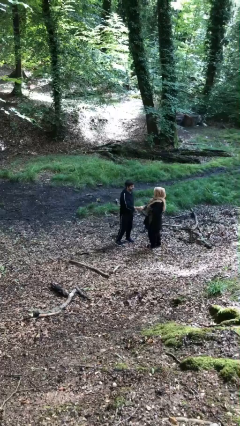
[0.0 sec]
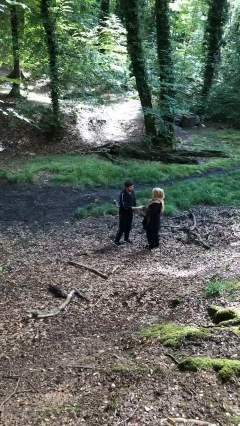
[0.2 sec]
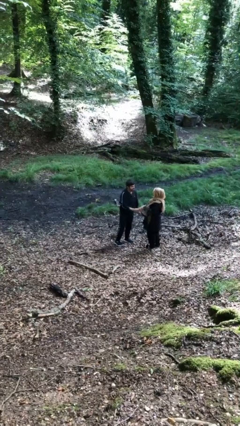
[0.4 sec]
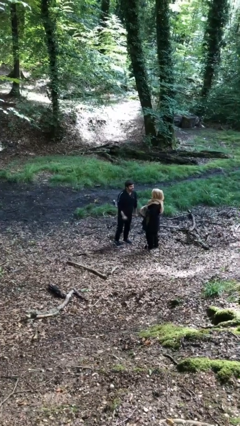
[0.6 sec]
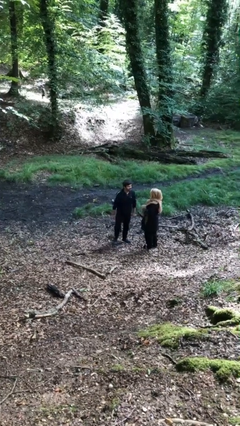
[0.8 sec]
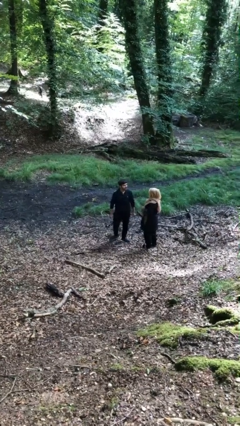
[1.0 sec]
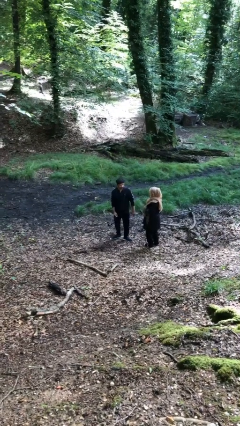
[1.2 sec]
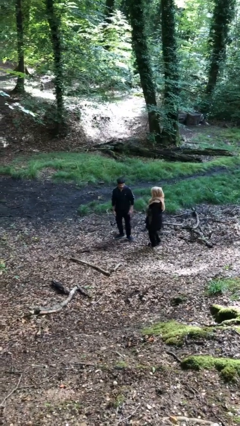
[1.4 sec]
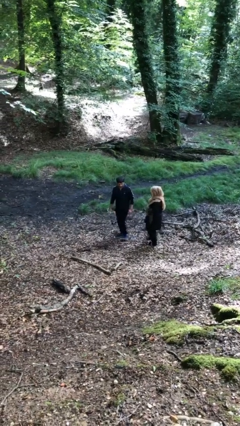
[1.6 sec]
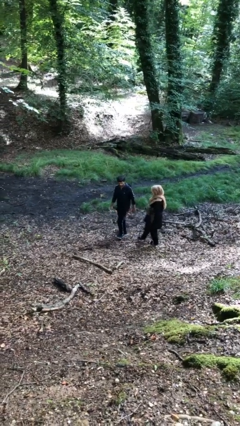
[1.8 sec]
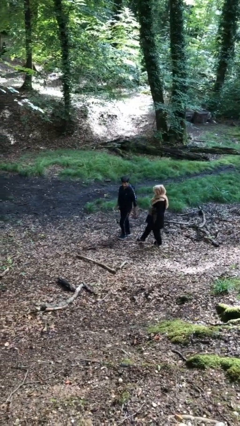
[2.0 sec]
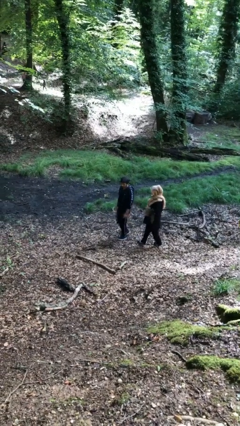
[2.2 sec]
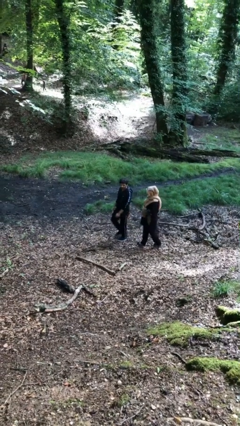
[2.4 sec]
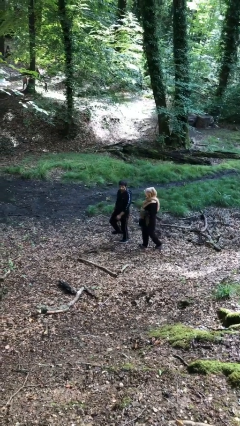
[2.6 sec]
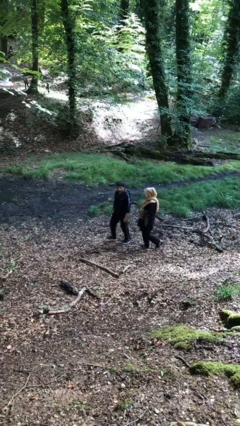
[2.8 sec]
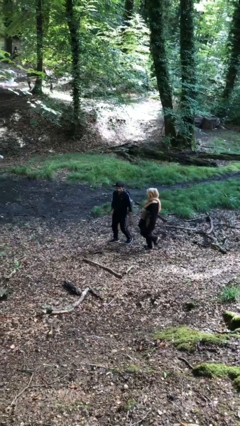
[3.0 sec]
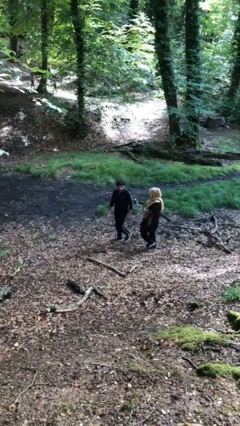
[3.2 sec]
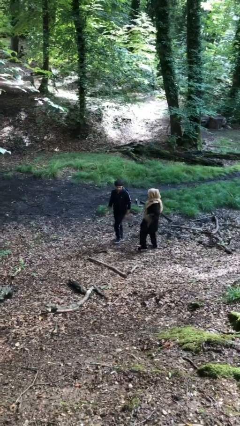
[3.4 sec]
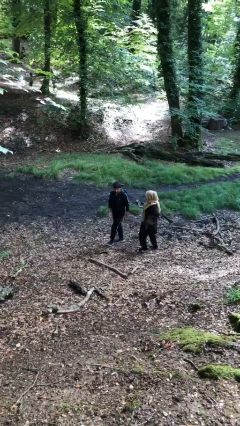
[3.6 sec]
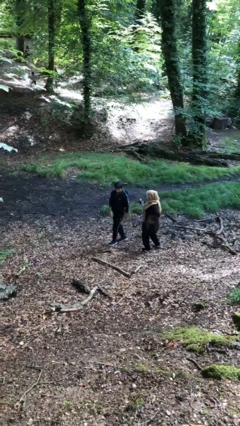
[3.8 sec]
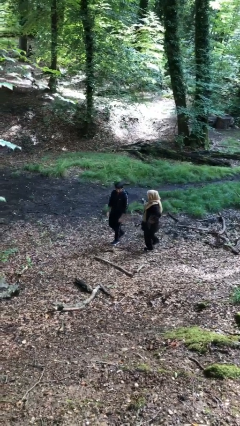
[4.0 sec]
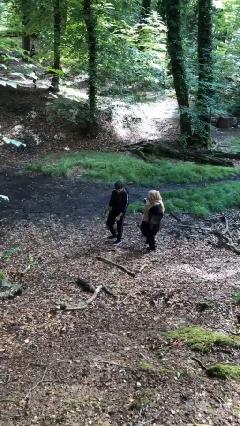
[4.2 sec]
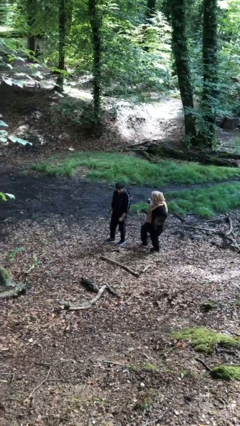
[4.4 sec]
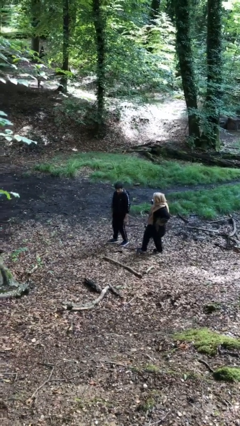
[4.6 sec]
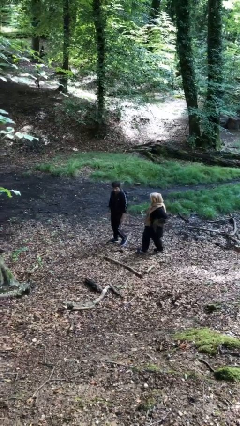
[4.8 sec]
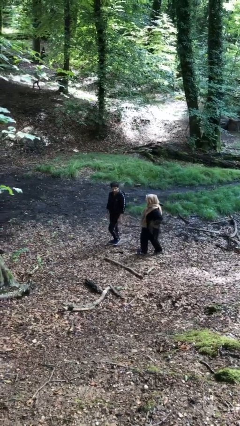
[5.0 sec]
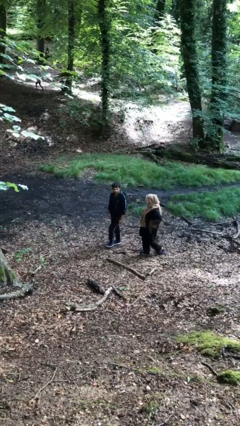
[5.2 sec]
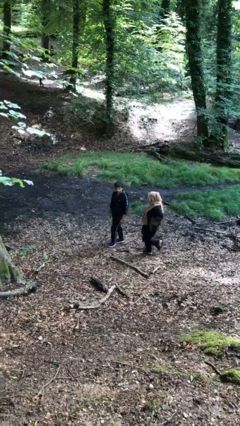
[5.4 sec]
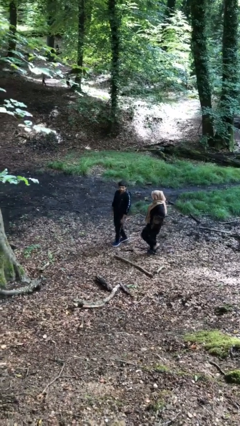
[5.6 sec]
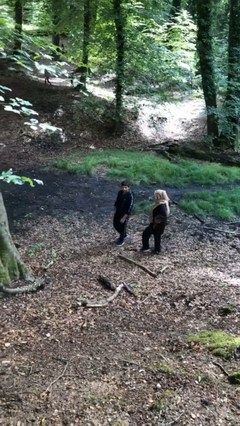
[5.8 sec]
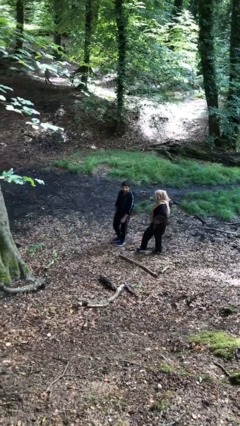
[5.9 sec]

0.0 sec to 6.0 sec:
person talks to person

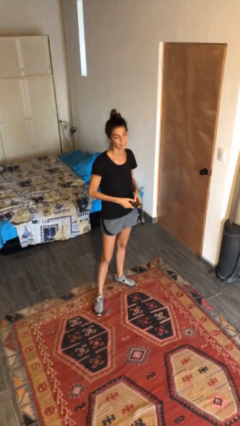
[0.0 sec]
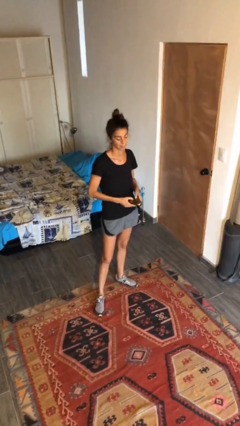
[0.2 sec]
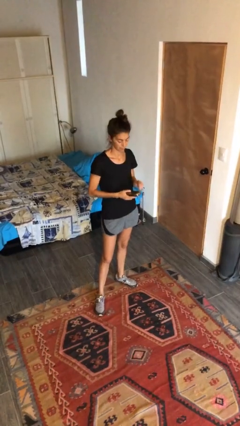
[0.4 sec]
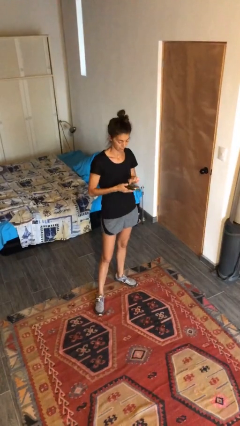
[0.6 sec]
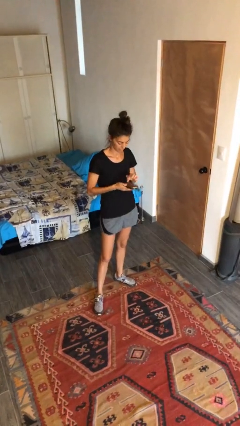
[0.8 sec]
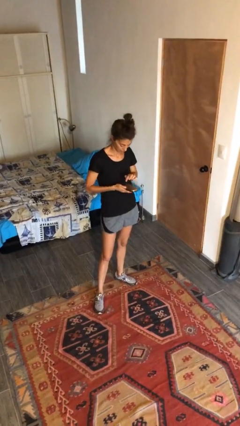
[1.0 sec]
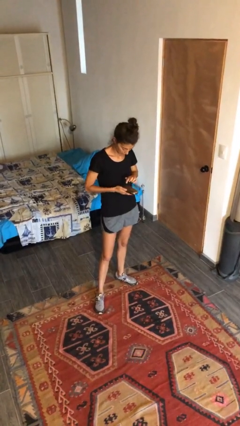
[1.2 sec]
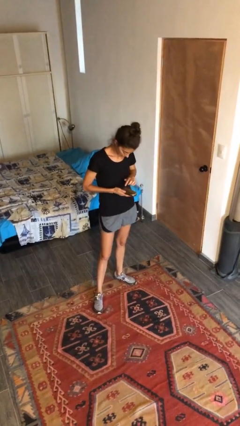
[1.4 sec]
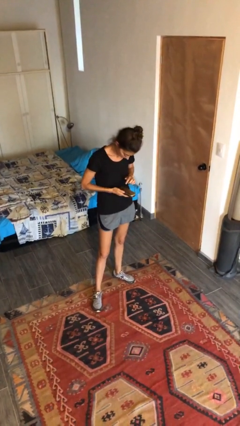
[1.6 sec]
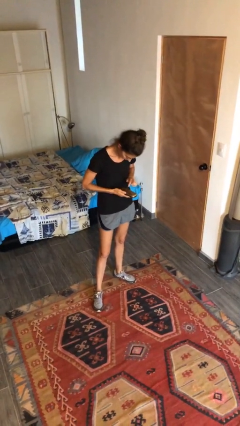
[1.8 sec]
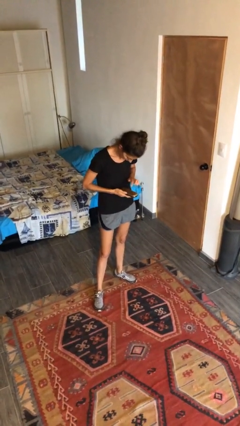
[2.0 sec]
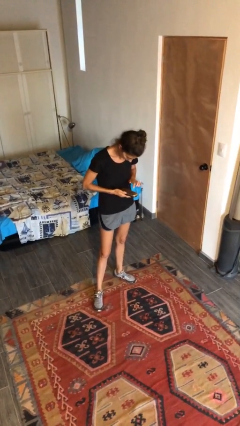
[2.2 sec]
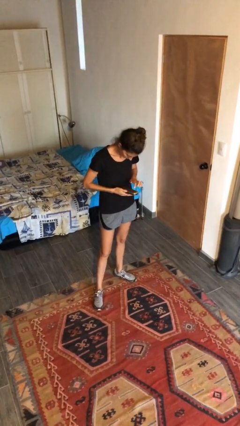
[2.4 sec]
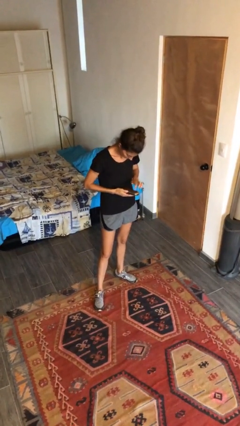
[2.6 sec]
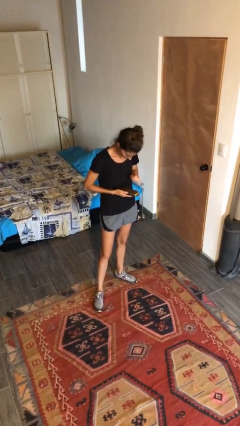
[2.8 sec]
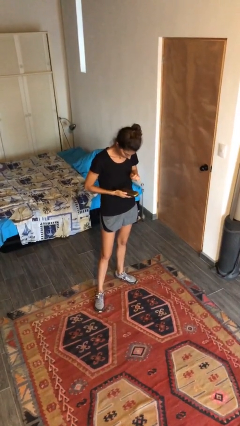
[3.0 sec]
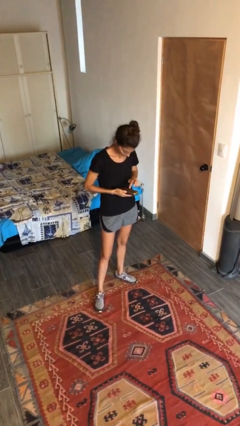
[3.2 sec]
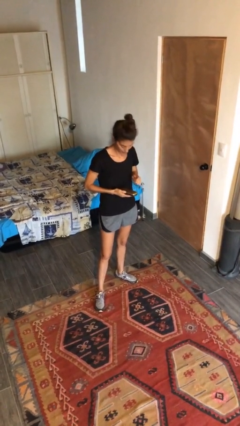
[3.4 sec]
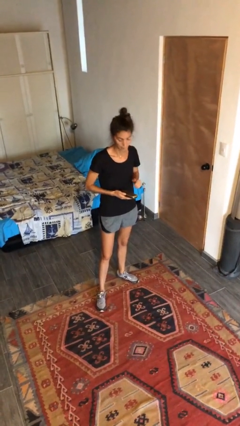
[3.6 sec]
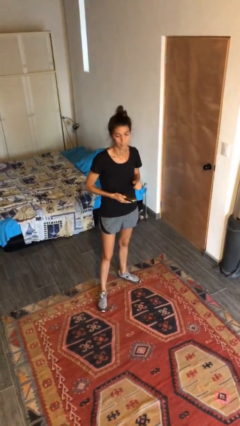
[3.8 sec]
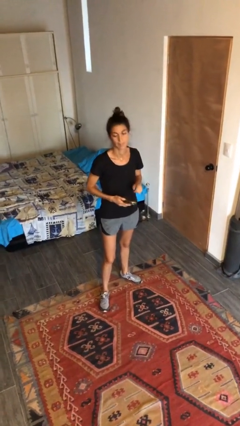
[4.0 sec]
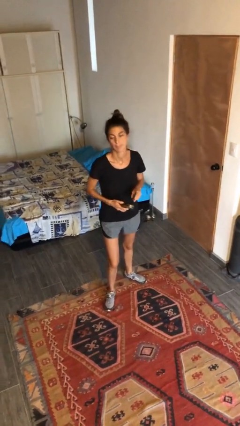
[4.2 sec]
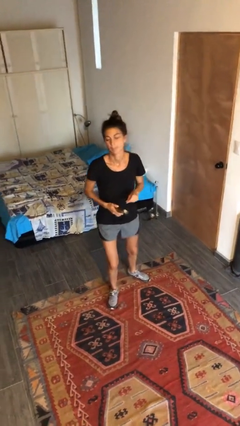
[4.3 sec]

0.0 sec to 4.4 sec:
person taps object with finger

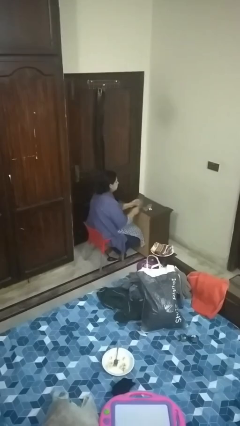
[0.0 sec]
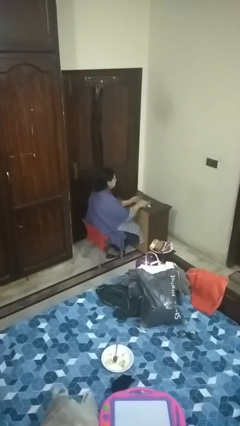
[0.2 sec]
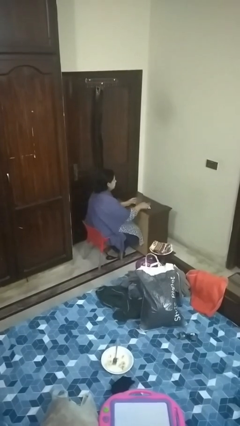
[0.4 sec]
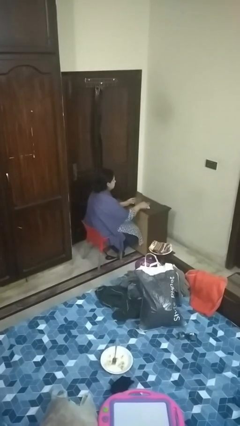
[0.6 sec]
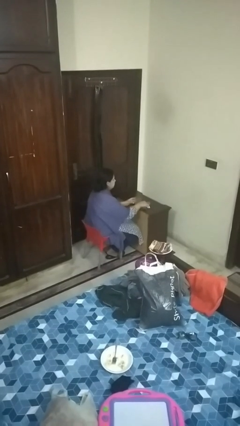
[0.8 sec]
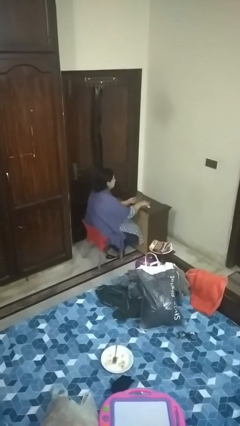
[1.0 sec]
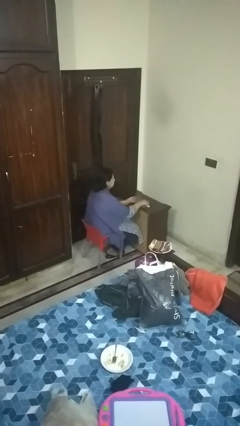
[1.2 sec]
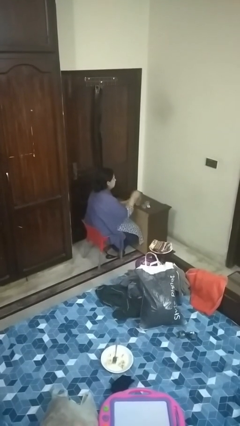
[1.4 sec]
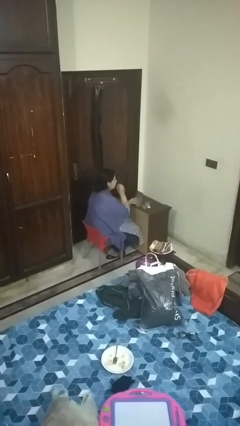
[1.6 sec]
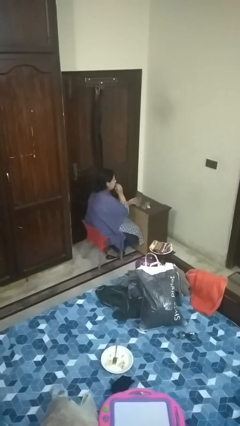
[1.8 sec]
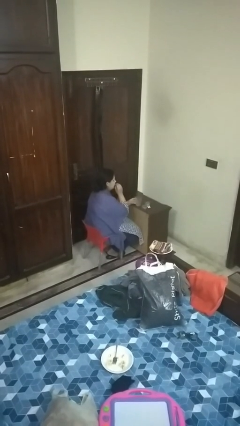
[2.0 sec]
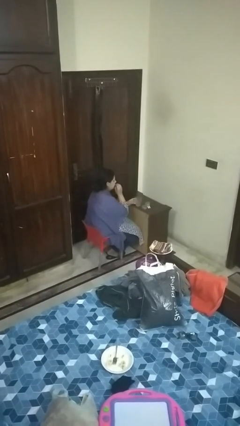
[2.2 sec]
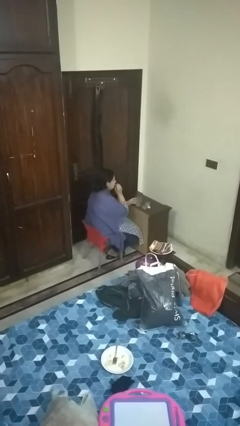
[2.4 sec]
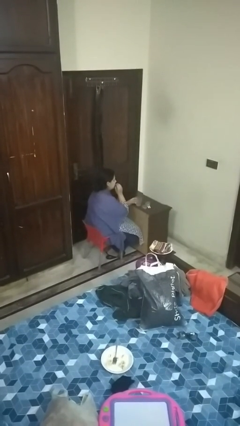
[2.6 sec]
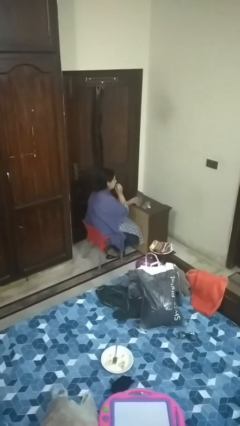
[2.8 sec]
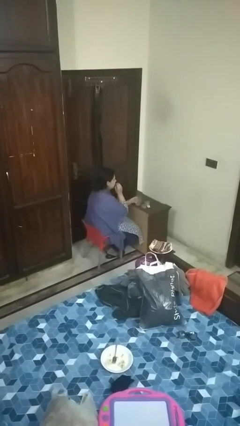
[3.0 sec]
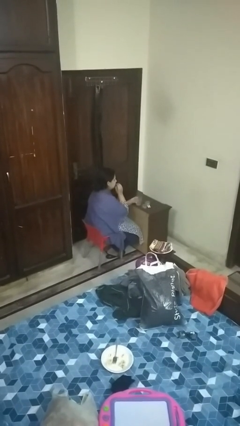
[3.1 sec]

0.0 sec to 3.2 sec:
person takes medicine pills

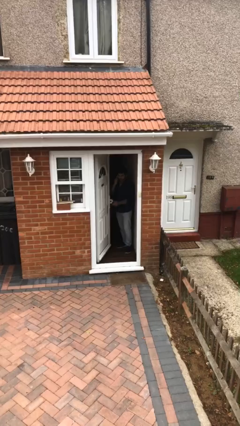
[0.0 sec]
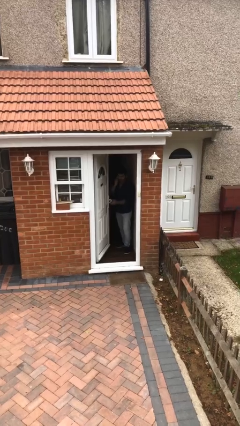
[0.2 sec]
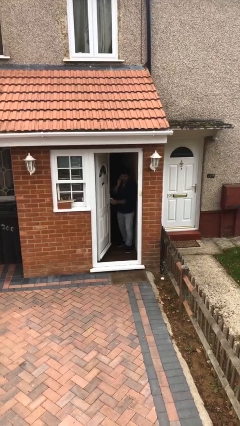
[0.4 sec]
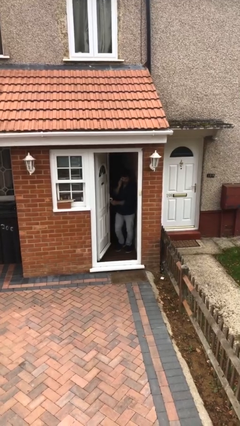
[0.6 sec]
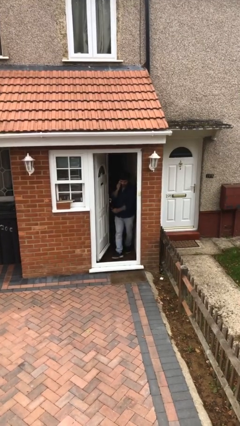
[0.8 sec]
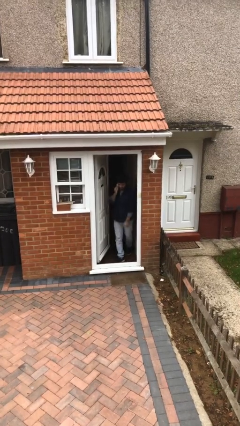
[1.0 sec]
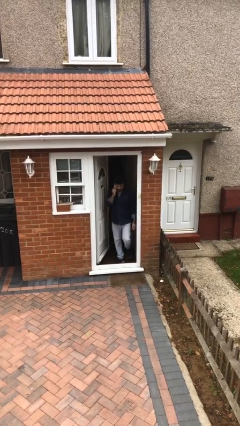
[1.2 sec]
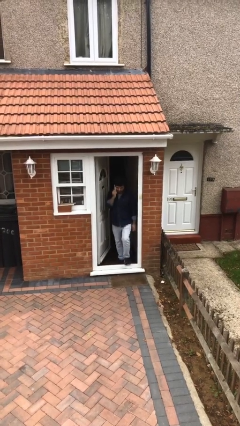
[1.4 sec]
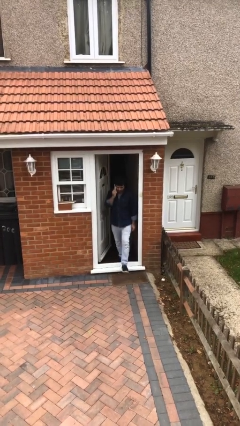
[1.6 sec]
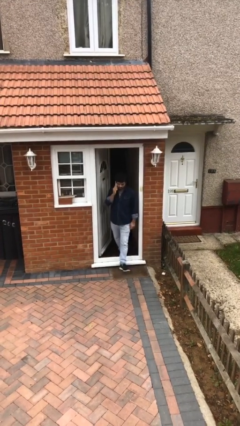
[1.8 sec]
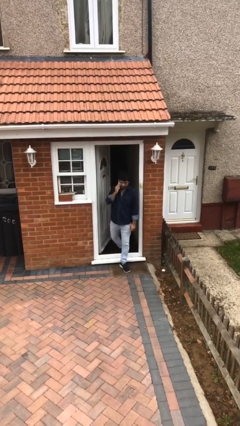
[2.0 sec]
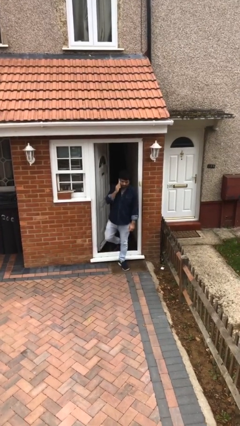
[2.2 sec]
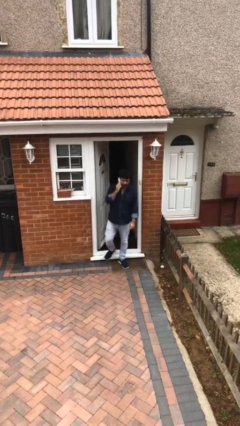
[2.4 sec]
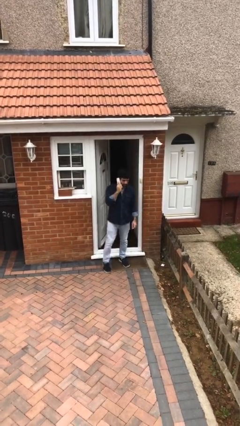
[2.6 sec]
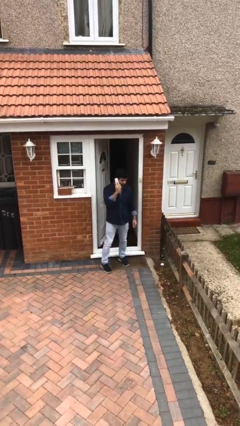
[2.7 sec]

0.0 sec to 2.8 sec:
person enters scene through structure

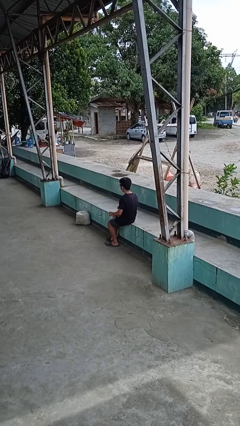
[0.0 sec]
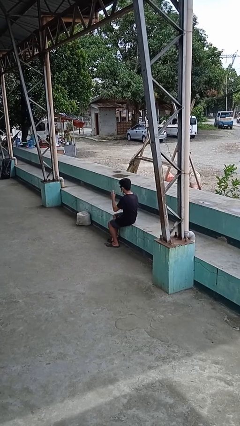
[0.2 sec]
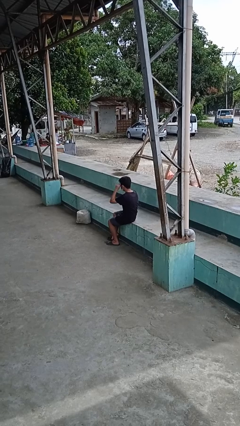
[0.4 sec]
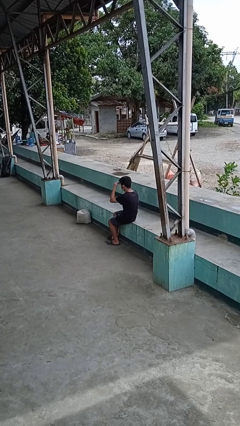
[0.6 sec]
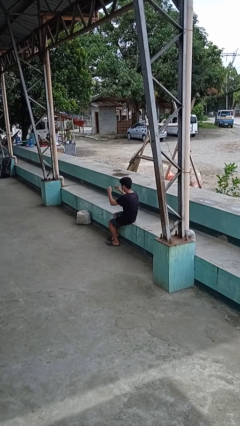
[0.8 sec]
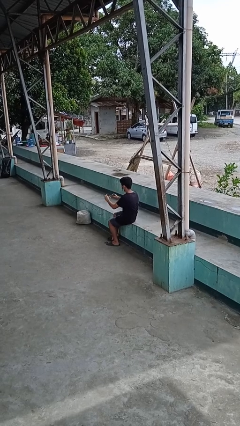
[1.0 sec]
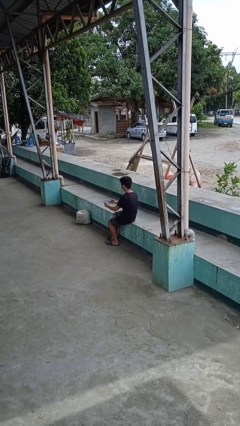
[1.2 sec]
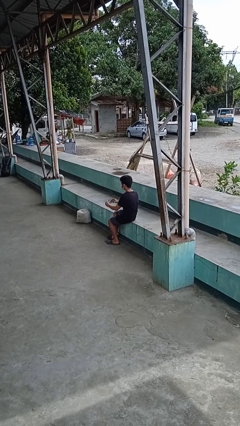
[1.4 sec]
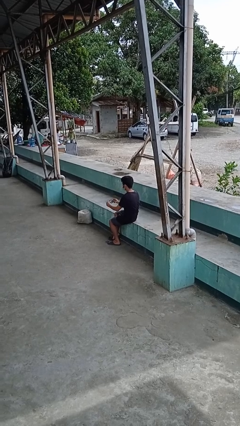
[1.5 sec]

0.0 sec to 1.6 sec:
person takes off sunglasses
